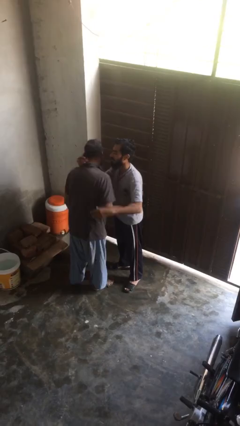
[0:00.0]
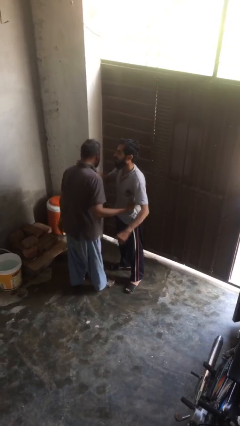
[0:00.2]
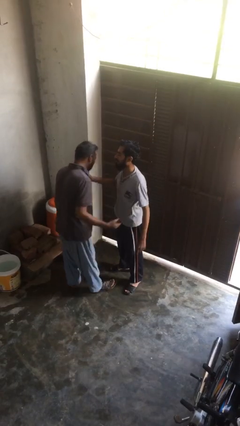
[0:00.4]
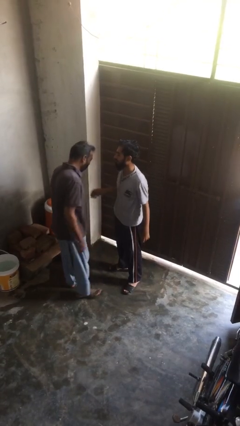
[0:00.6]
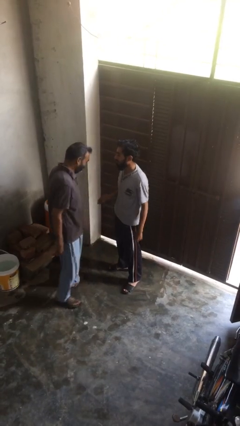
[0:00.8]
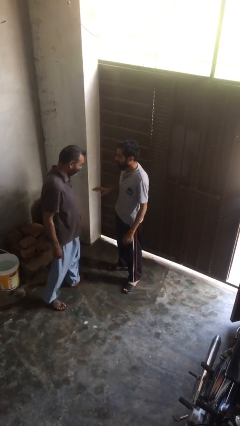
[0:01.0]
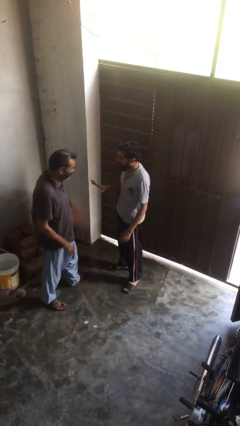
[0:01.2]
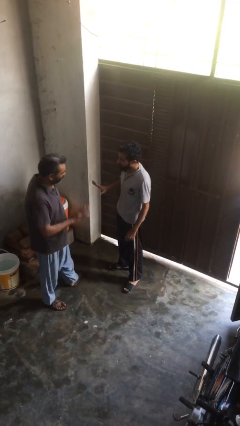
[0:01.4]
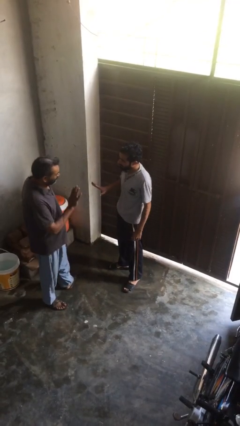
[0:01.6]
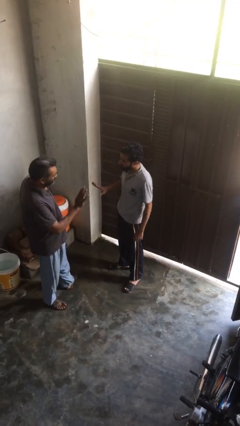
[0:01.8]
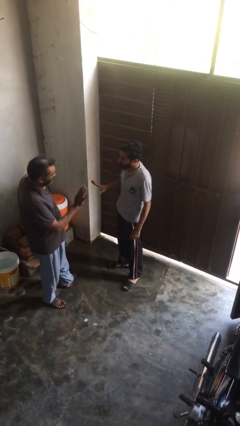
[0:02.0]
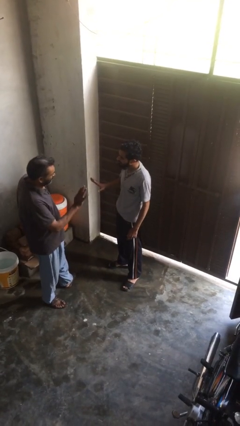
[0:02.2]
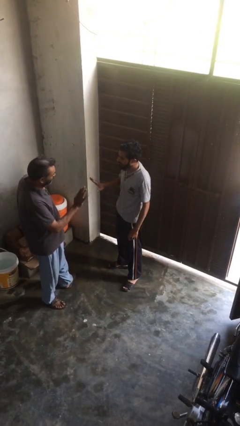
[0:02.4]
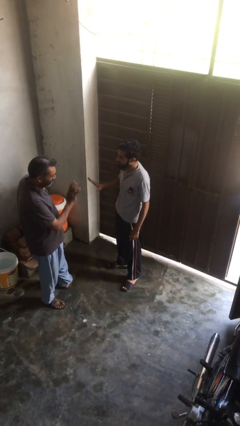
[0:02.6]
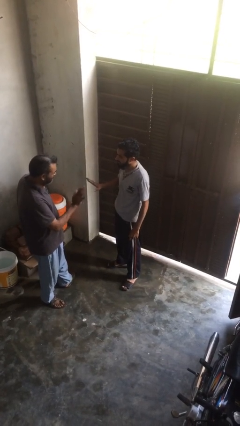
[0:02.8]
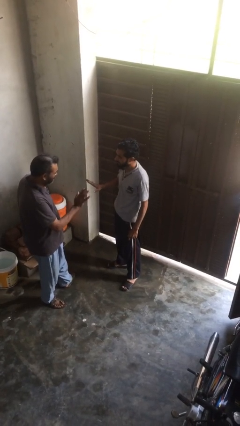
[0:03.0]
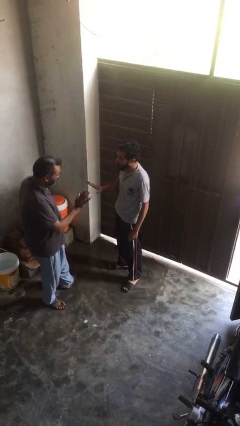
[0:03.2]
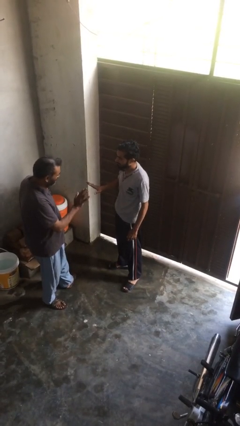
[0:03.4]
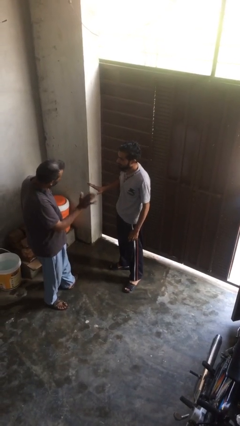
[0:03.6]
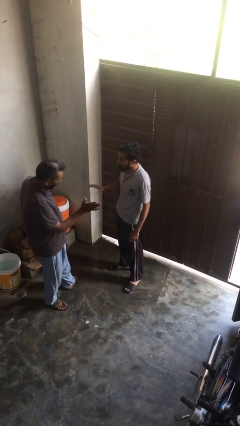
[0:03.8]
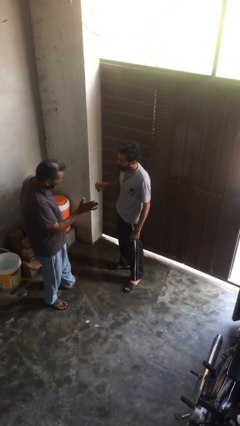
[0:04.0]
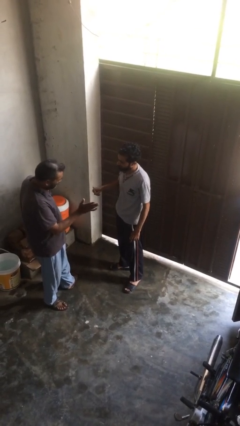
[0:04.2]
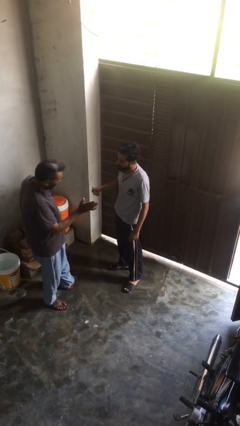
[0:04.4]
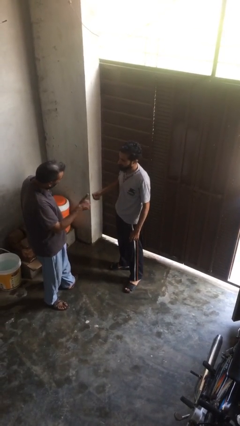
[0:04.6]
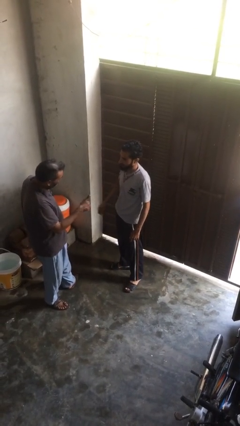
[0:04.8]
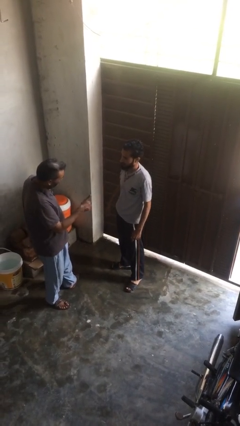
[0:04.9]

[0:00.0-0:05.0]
person talks to person

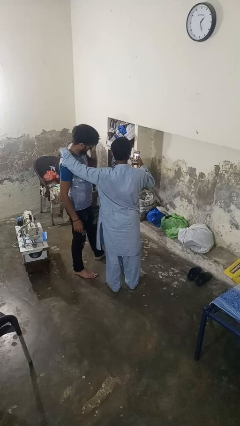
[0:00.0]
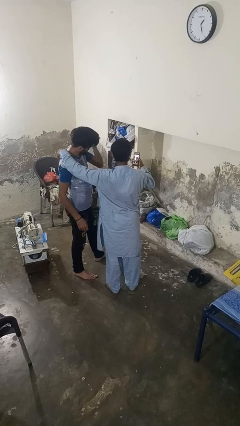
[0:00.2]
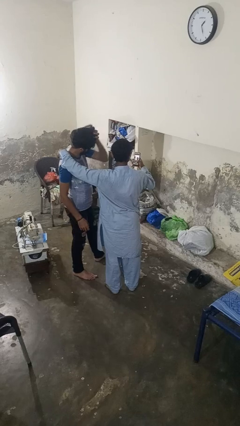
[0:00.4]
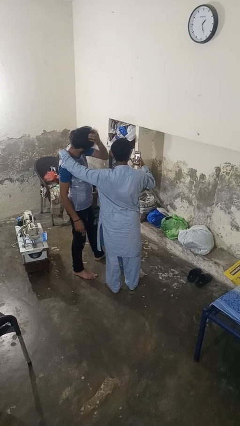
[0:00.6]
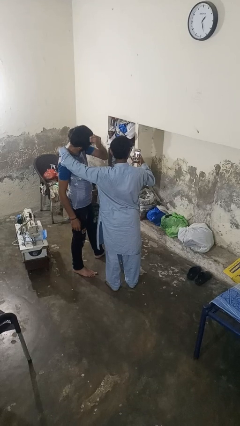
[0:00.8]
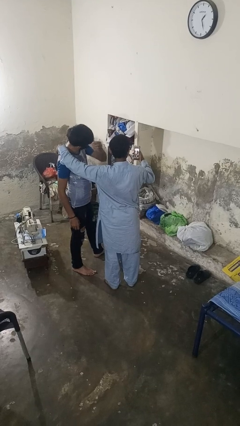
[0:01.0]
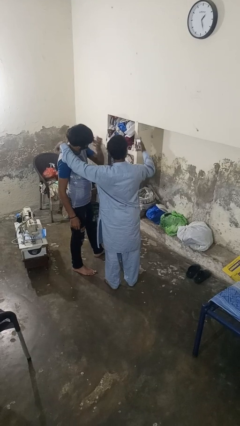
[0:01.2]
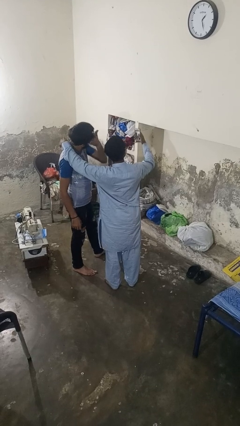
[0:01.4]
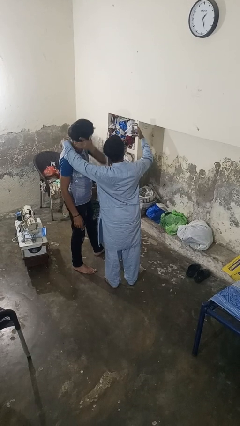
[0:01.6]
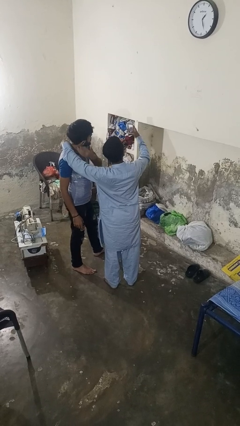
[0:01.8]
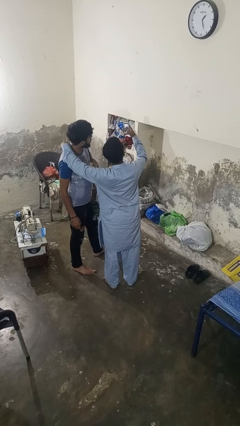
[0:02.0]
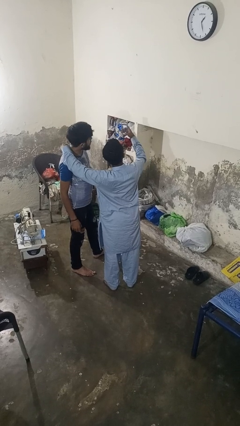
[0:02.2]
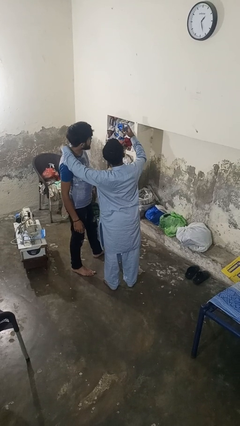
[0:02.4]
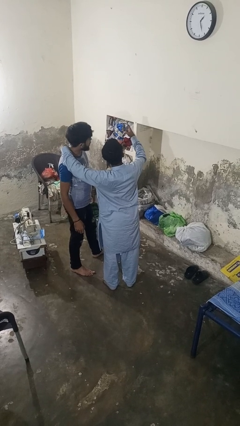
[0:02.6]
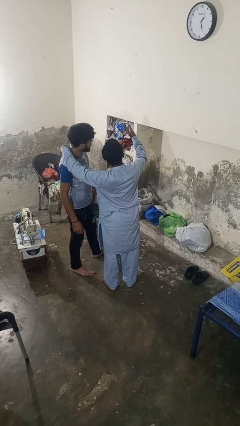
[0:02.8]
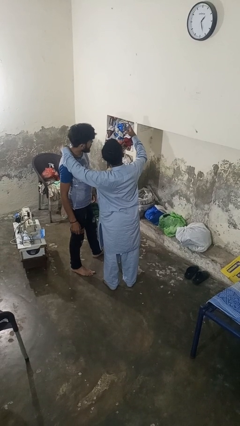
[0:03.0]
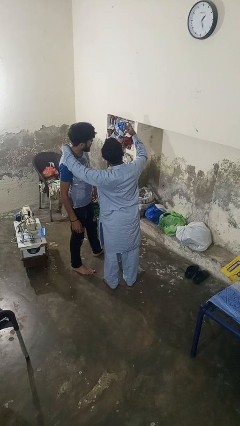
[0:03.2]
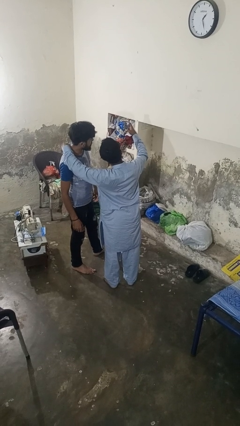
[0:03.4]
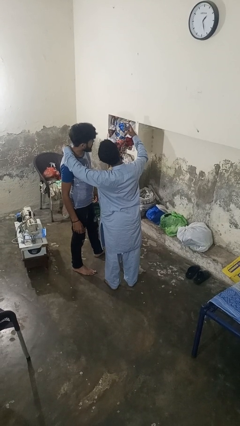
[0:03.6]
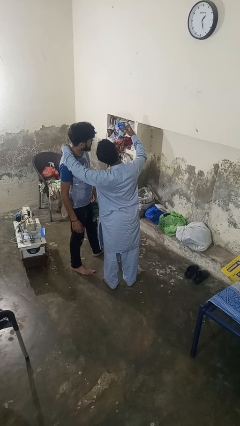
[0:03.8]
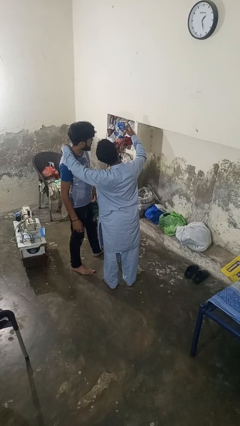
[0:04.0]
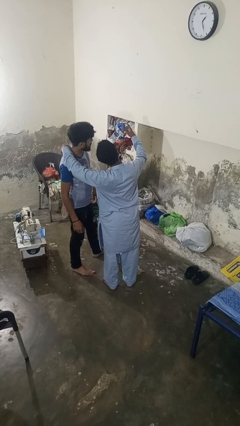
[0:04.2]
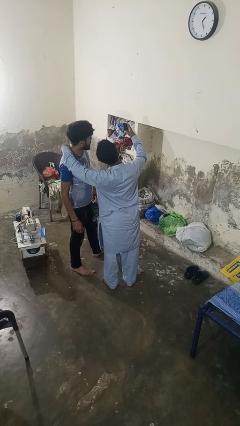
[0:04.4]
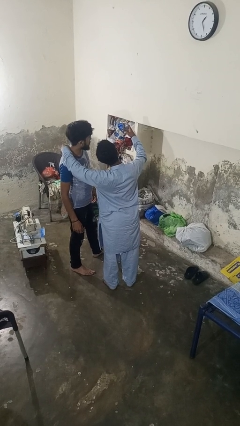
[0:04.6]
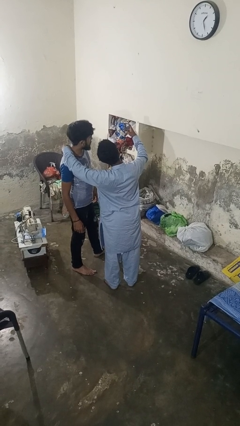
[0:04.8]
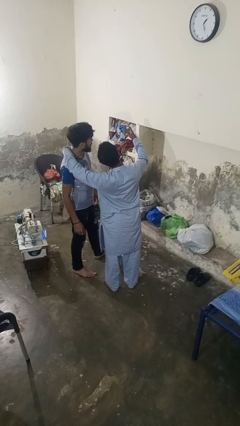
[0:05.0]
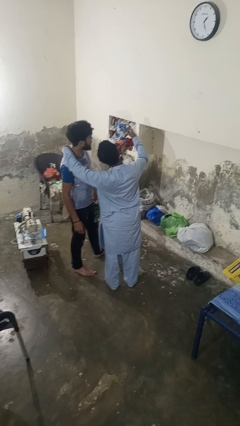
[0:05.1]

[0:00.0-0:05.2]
person takes selfie with person

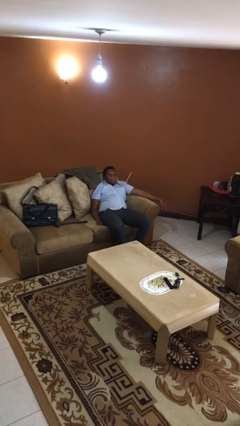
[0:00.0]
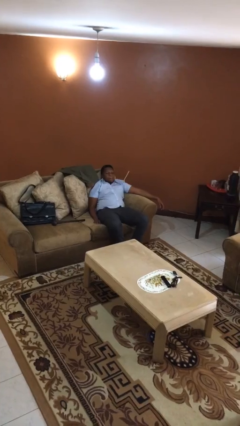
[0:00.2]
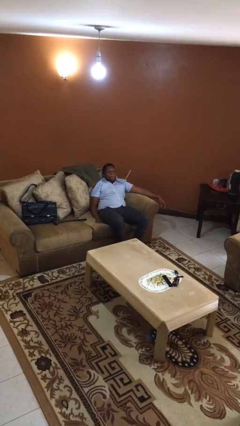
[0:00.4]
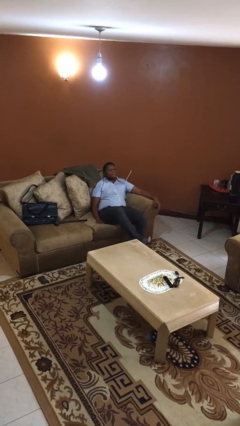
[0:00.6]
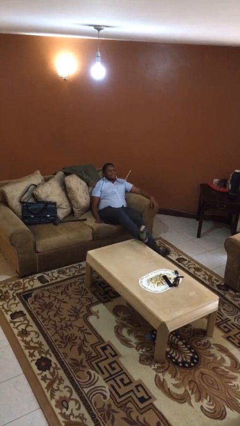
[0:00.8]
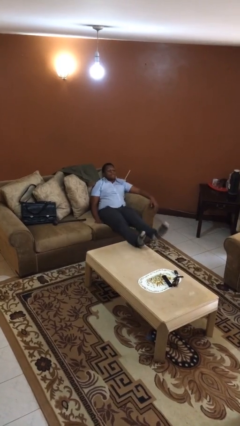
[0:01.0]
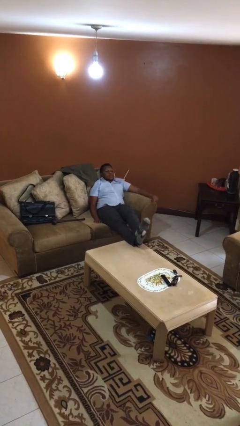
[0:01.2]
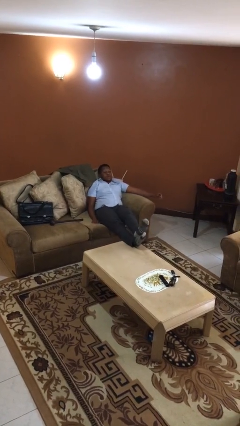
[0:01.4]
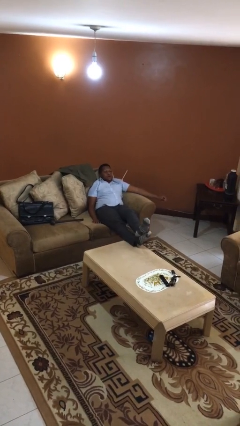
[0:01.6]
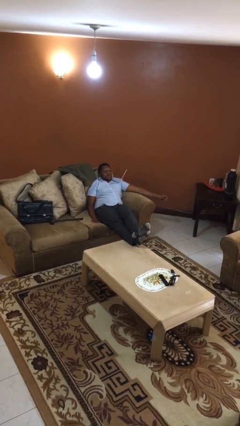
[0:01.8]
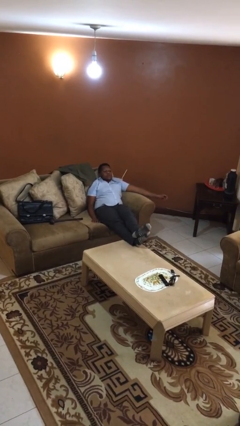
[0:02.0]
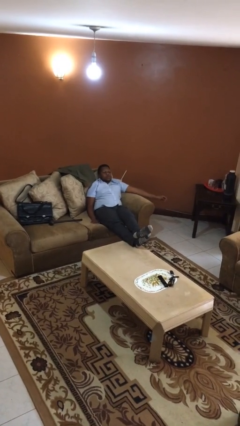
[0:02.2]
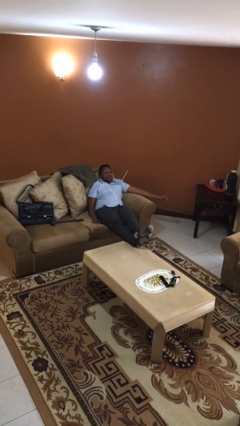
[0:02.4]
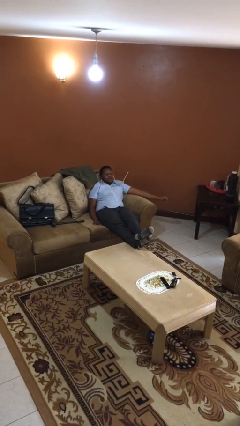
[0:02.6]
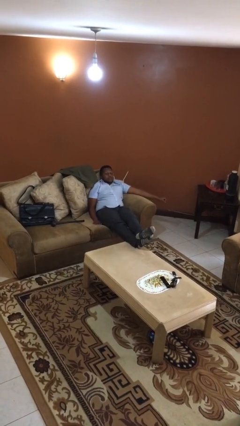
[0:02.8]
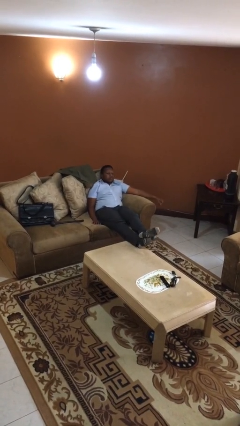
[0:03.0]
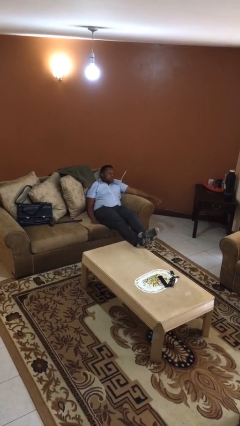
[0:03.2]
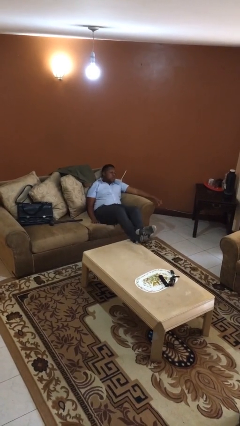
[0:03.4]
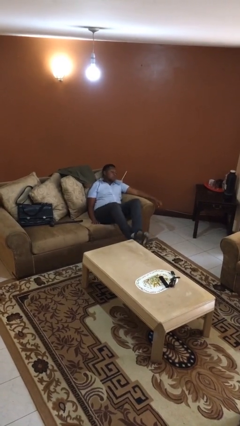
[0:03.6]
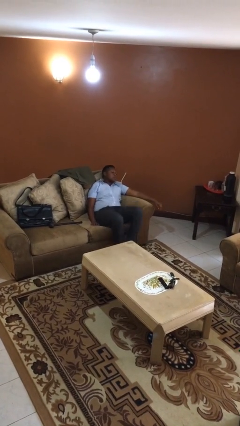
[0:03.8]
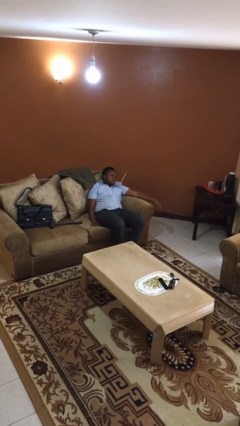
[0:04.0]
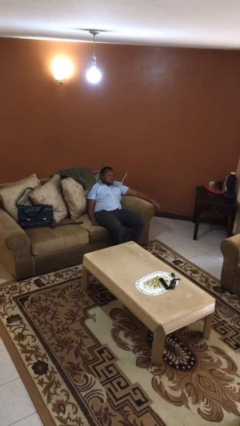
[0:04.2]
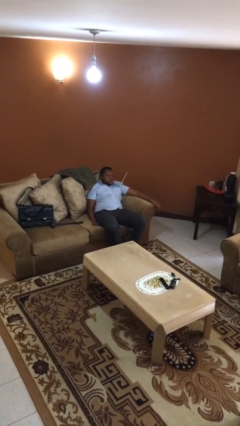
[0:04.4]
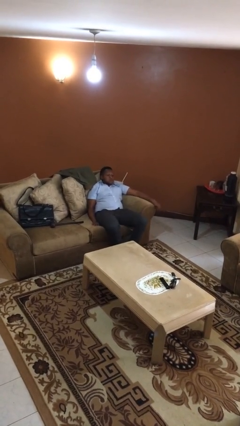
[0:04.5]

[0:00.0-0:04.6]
person puts feet up

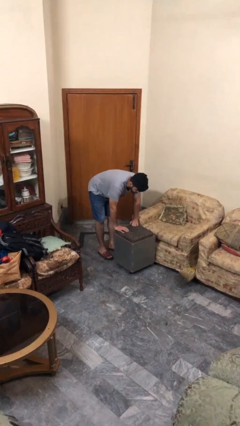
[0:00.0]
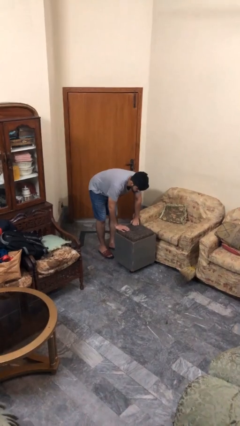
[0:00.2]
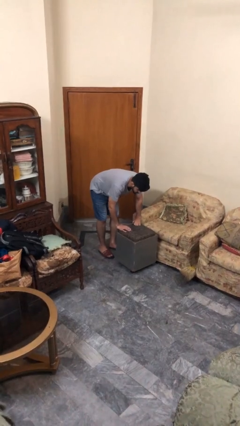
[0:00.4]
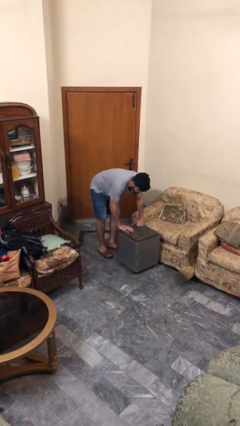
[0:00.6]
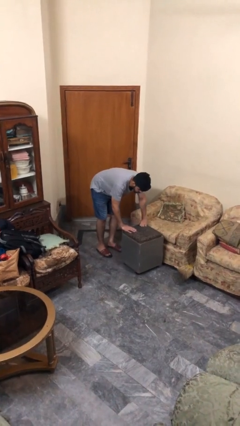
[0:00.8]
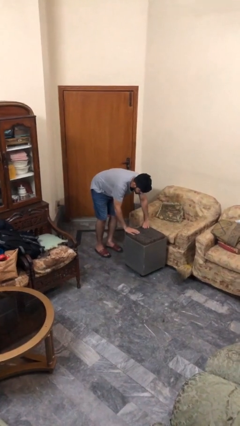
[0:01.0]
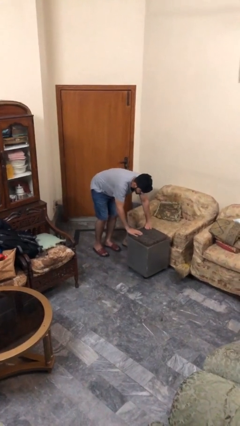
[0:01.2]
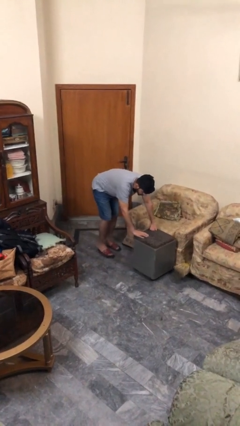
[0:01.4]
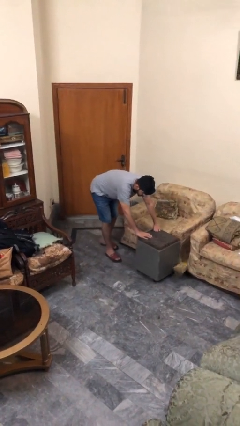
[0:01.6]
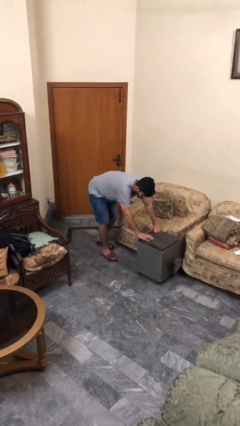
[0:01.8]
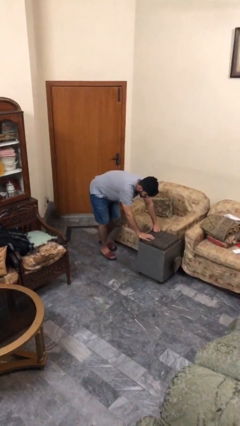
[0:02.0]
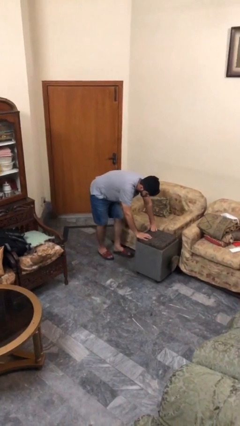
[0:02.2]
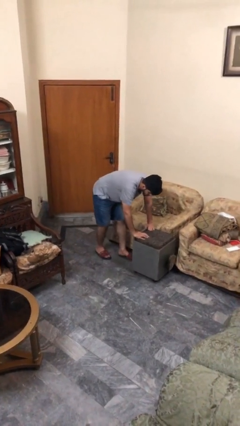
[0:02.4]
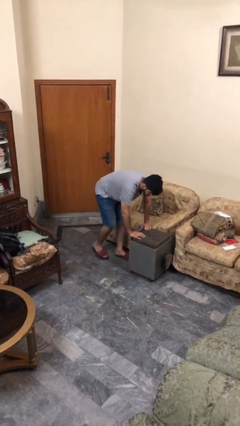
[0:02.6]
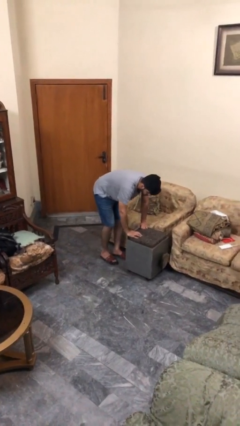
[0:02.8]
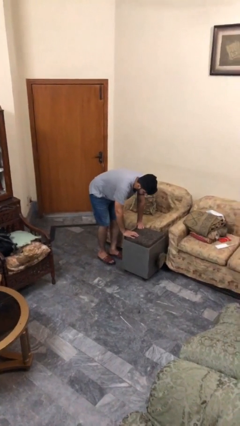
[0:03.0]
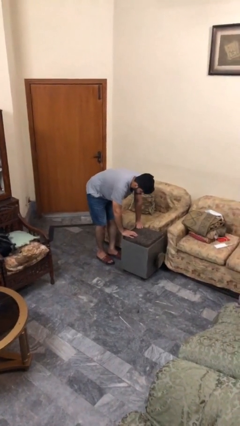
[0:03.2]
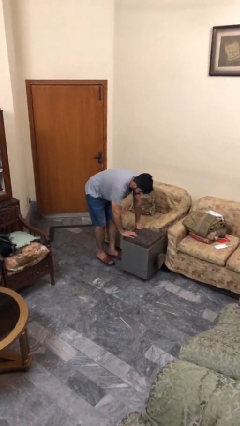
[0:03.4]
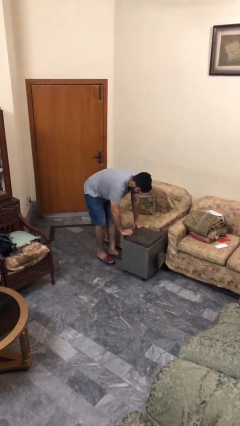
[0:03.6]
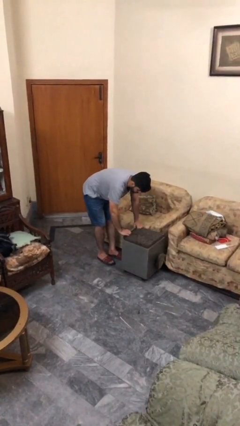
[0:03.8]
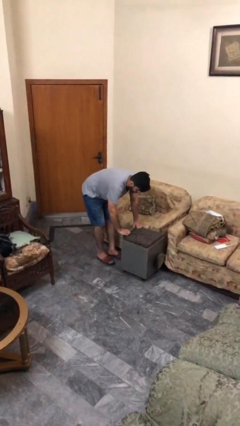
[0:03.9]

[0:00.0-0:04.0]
person pushes wheeled cart
